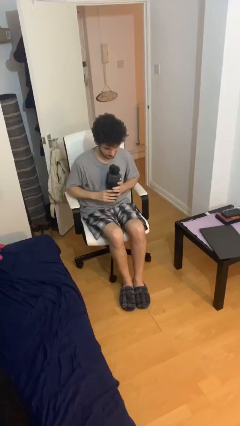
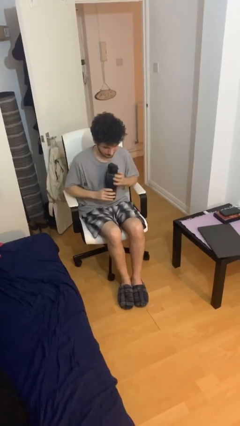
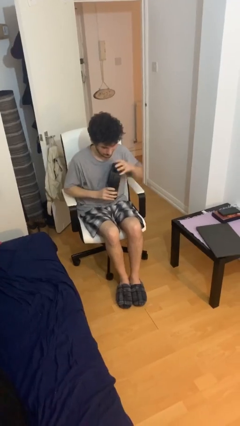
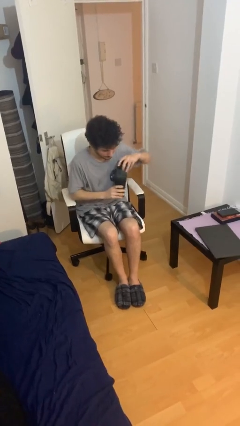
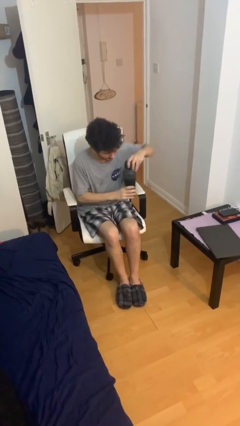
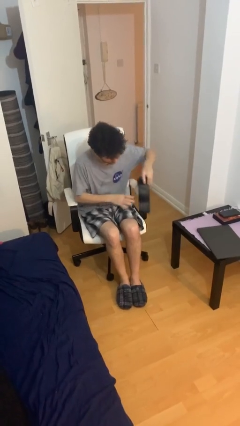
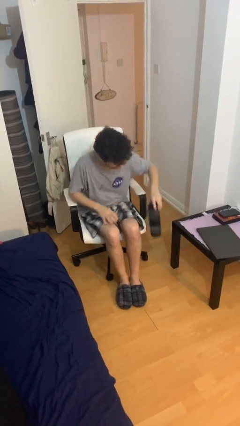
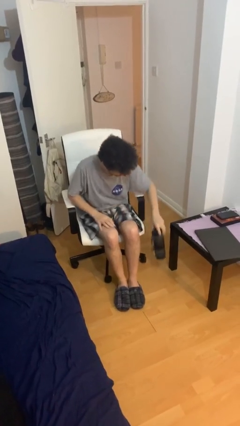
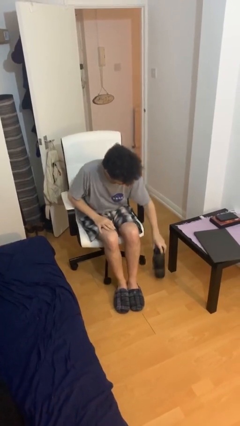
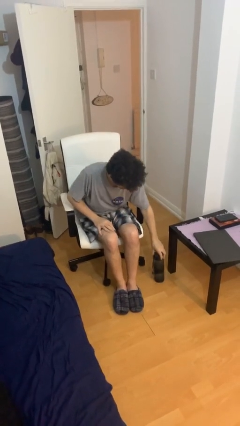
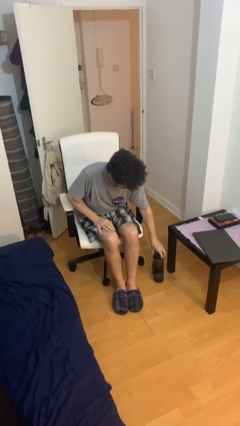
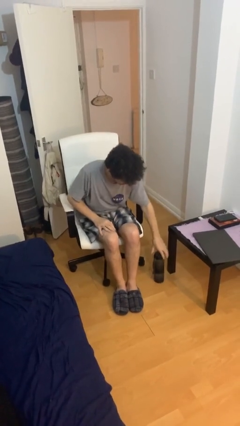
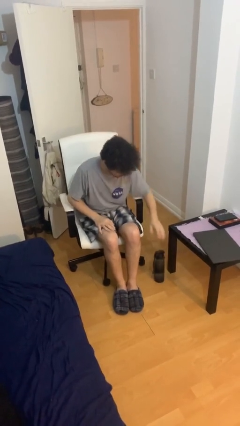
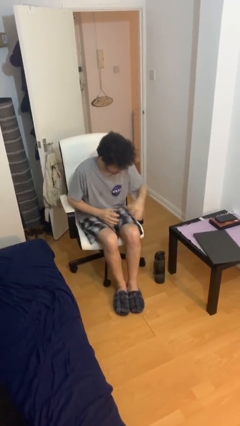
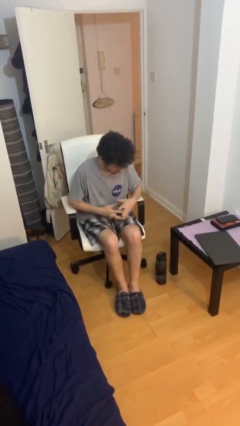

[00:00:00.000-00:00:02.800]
person puts down object on floor

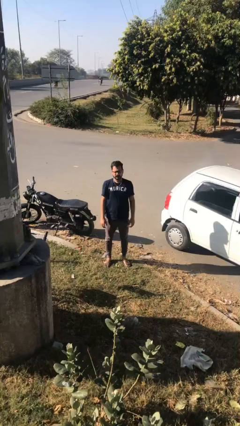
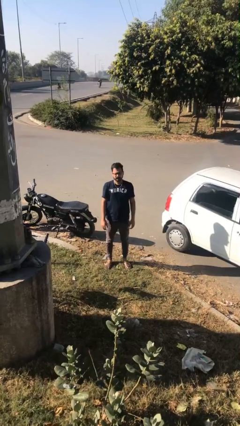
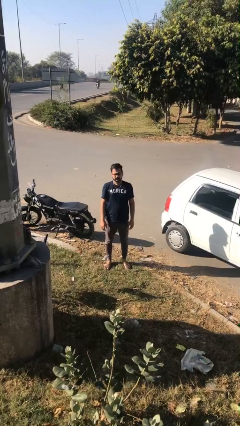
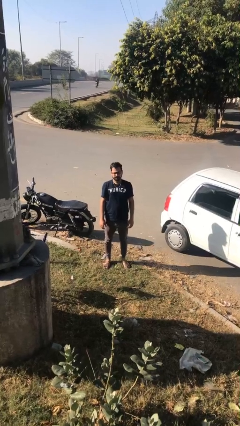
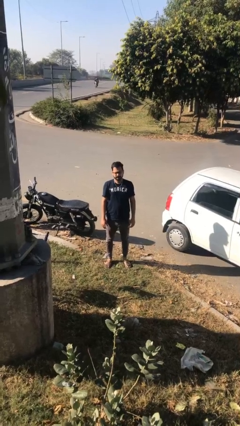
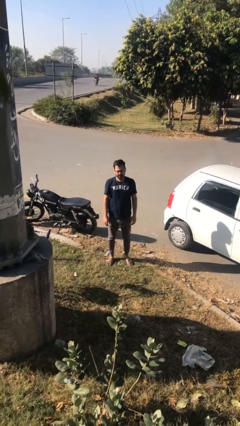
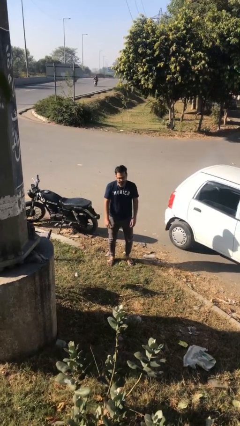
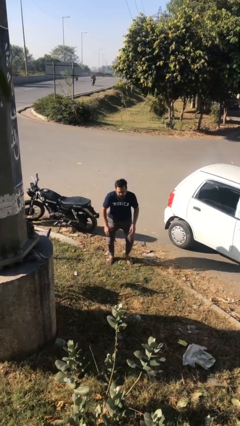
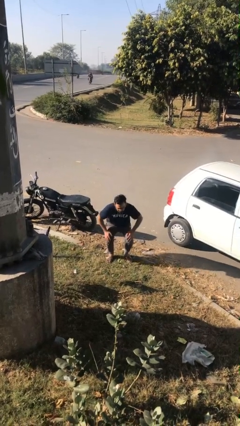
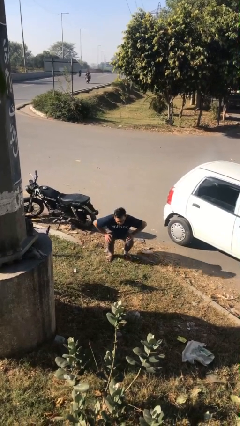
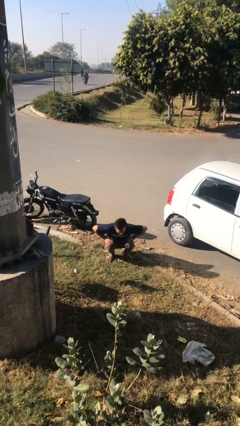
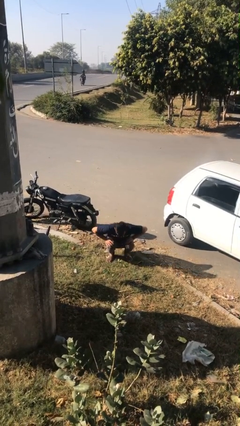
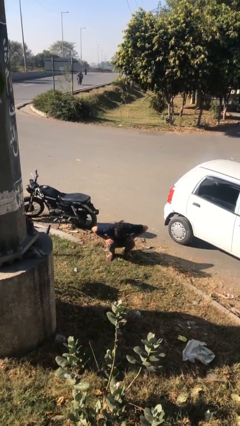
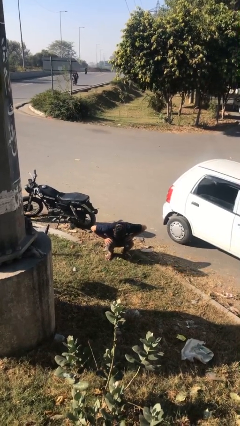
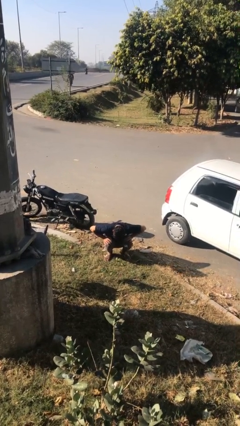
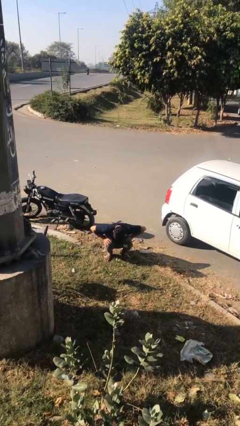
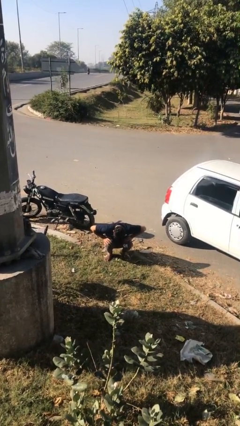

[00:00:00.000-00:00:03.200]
person sits down

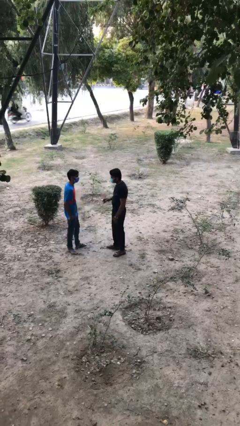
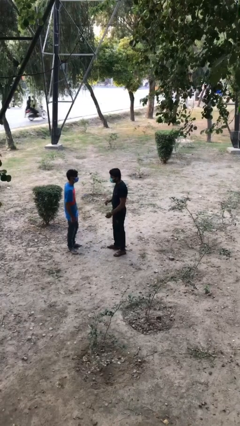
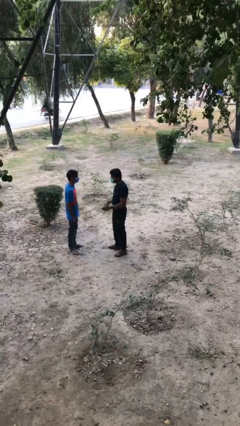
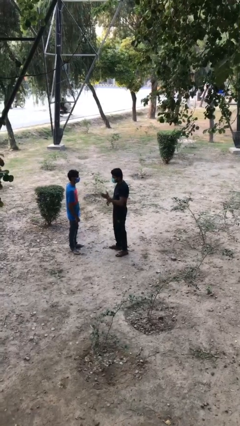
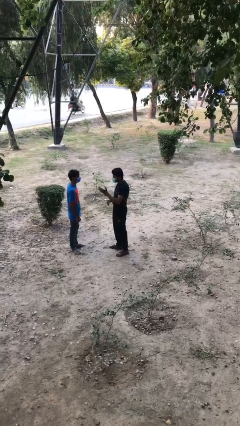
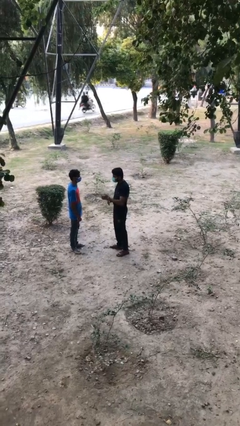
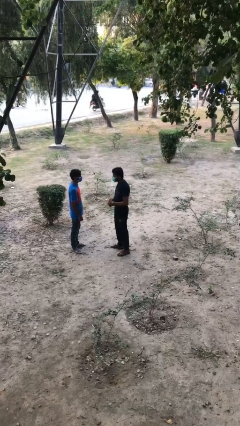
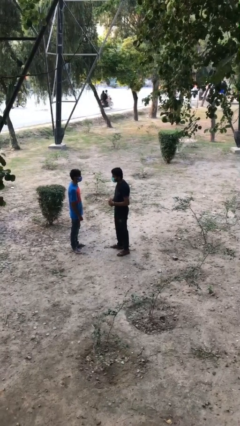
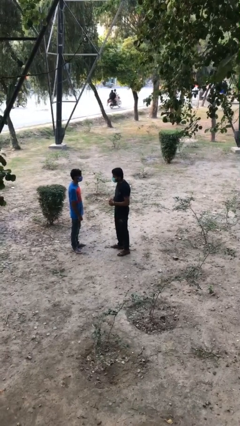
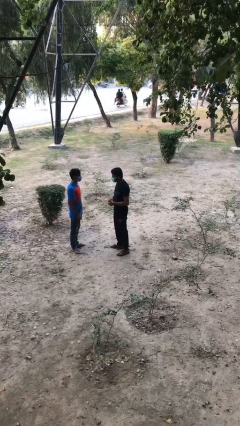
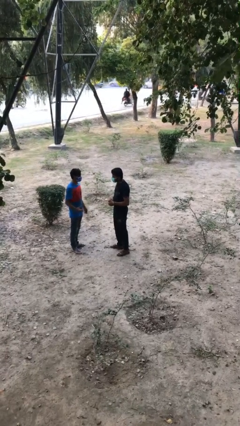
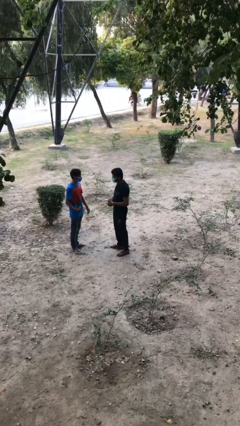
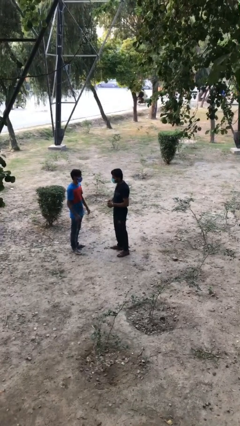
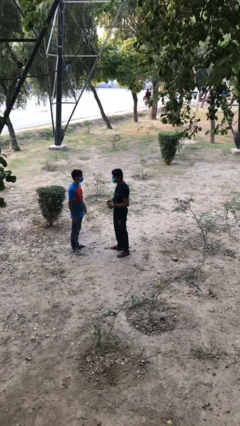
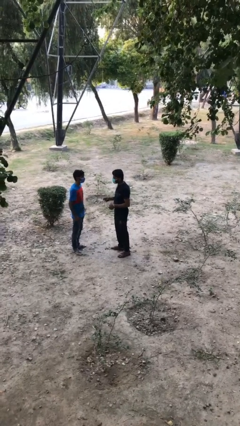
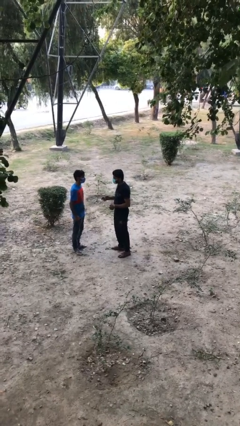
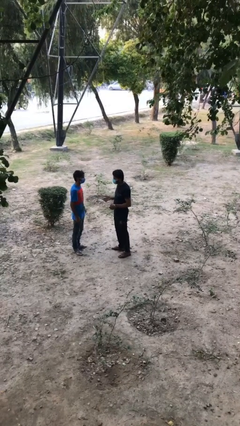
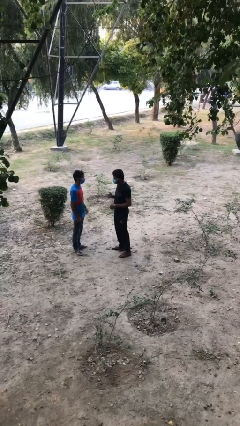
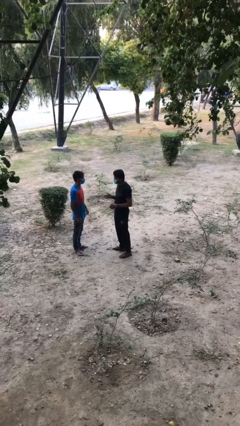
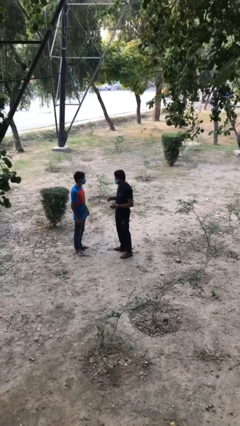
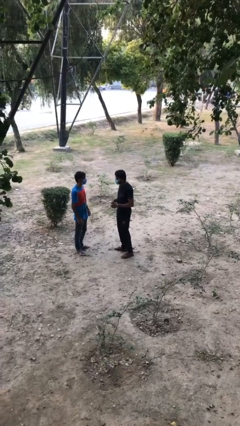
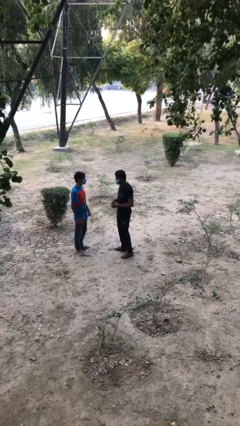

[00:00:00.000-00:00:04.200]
person talks to person

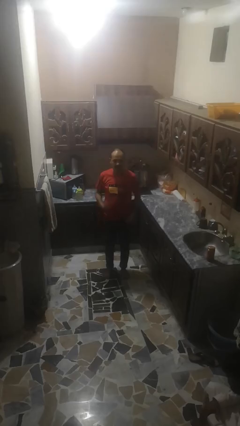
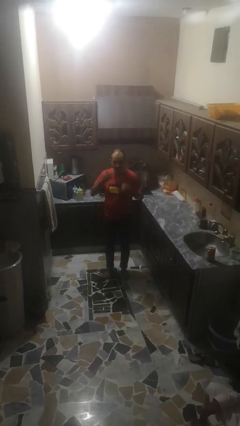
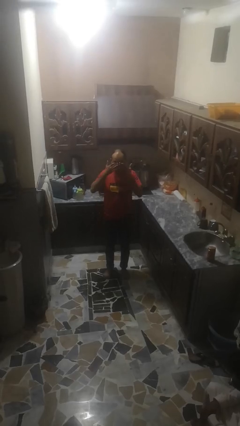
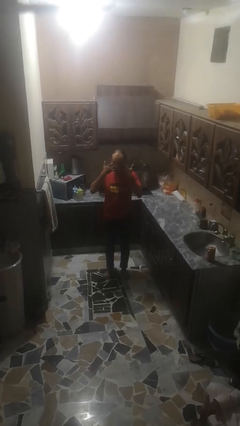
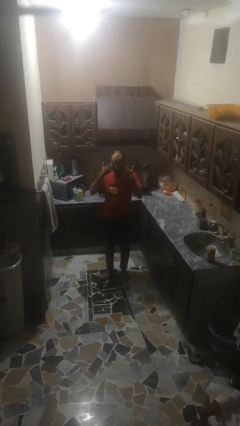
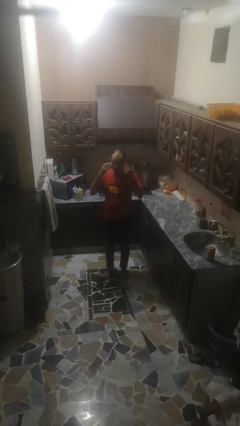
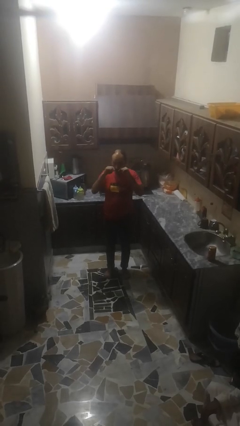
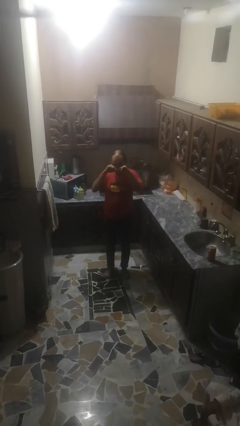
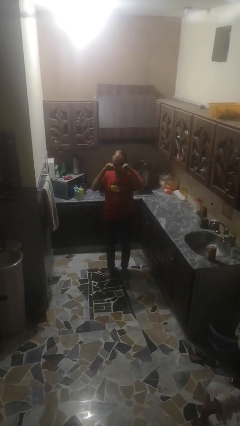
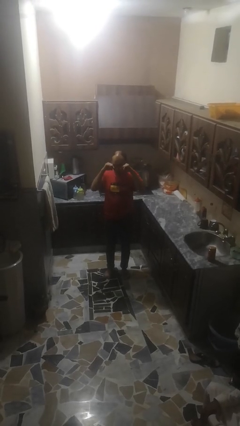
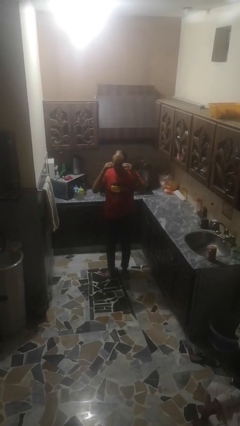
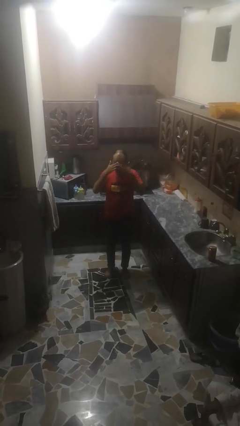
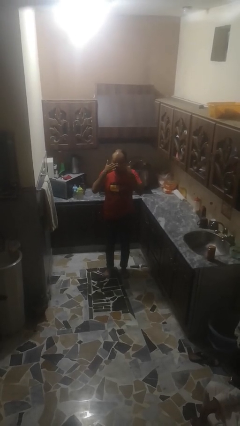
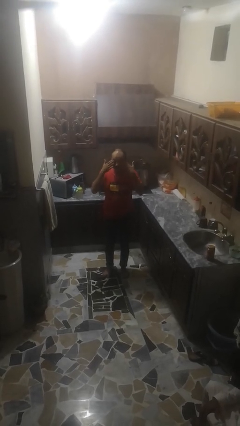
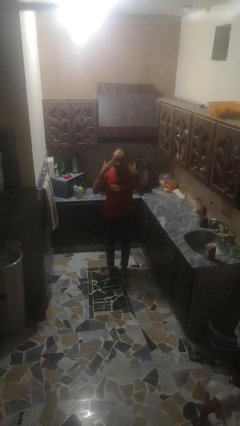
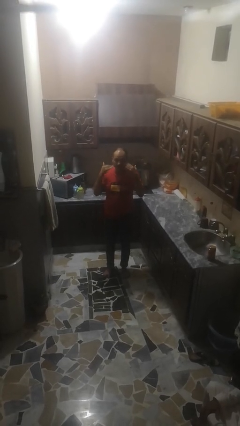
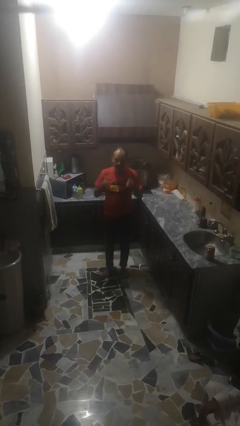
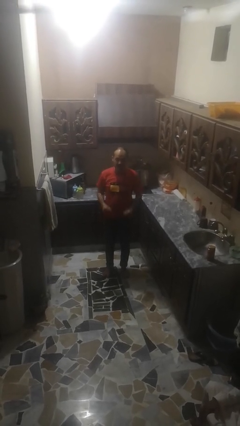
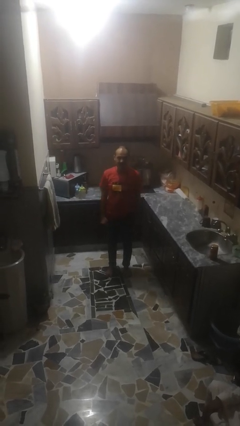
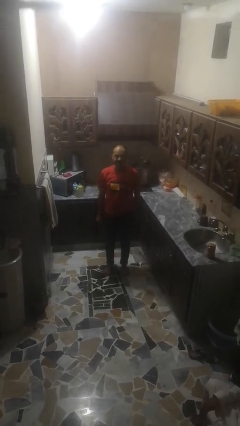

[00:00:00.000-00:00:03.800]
person rubs eyes

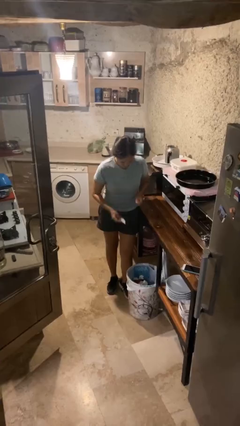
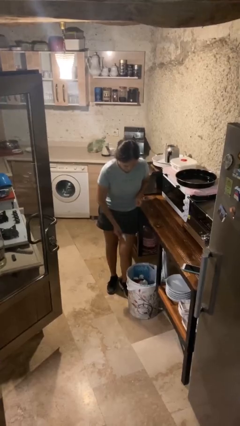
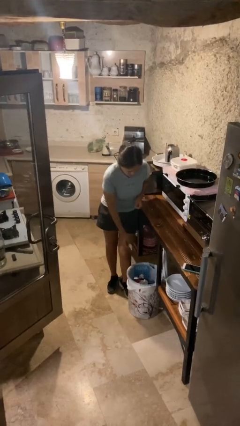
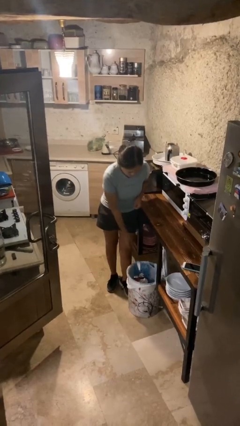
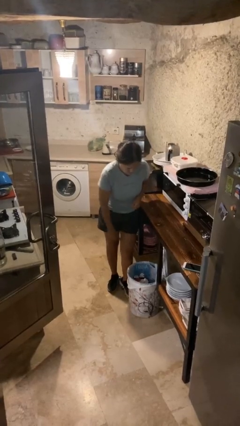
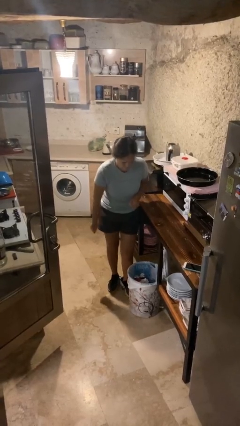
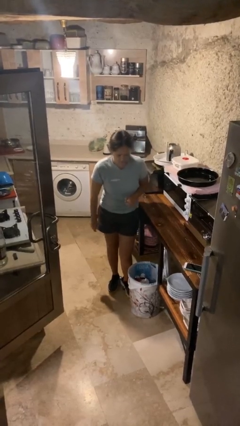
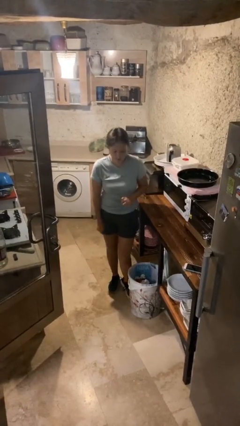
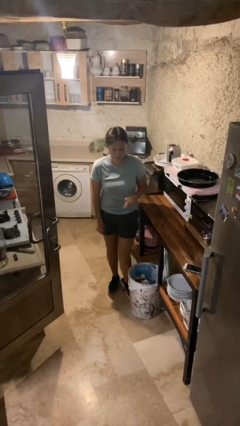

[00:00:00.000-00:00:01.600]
person discards trash

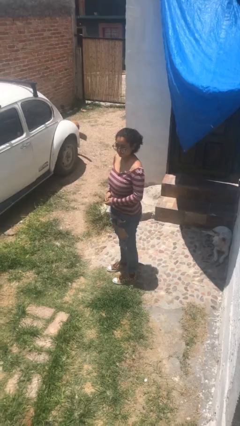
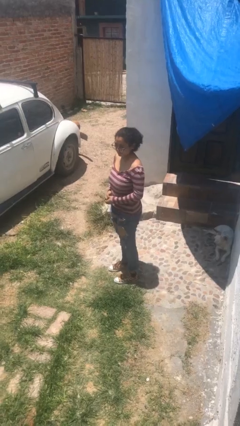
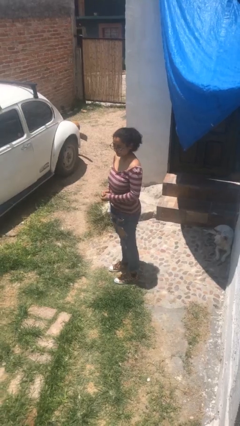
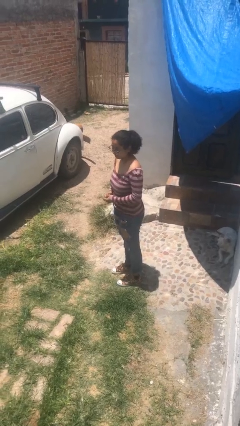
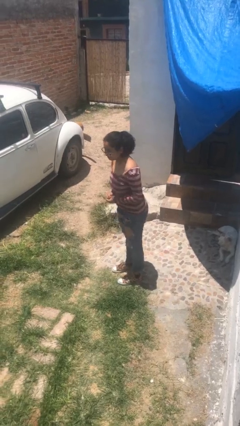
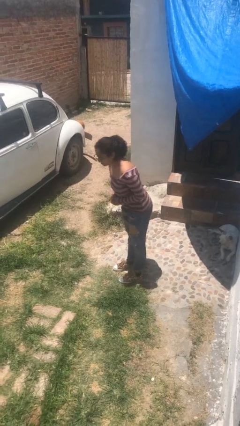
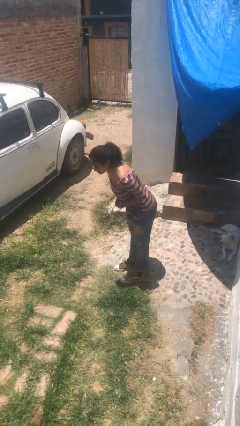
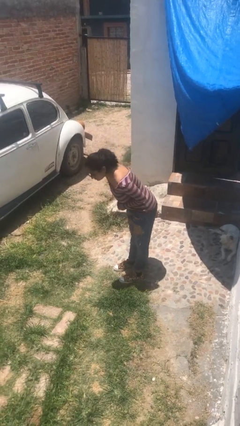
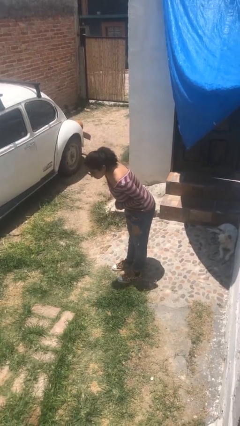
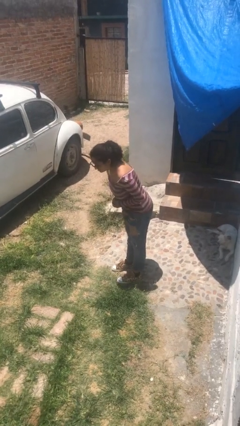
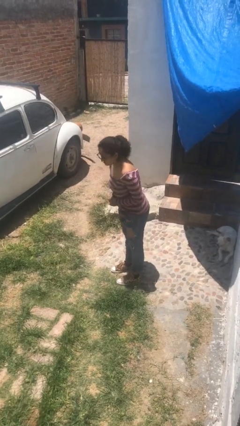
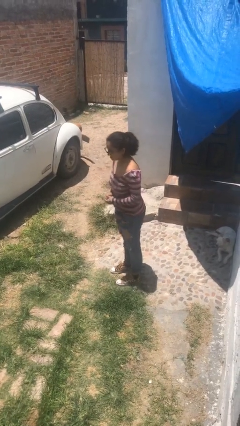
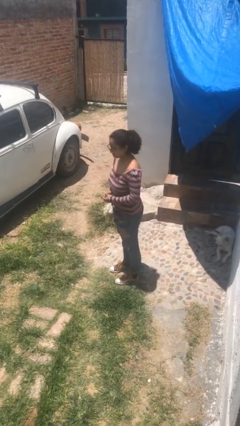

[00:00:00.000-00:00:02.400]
person bows
